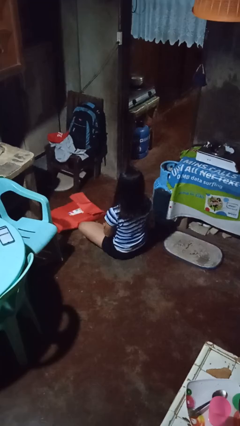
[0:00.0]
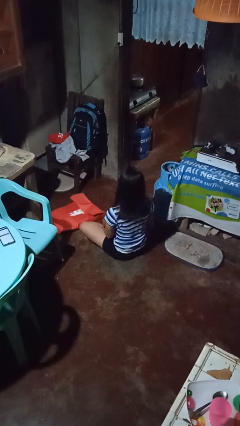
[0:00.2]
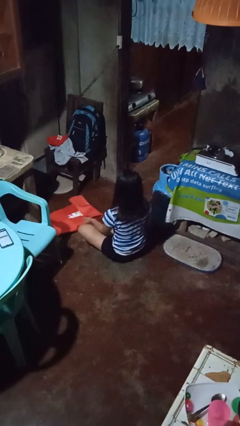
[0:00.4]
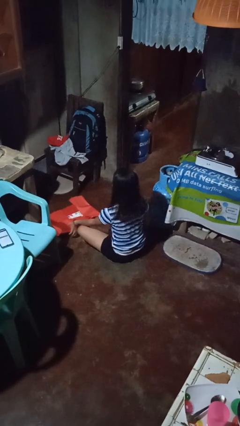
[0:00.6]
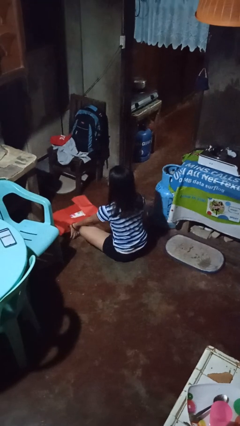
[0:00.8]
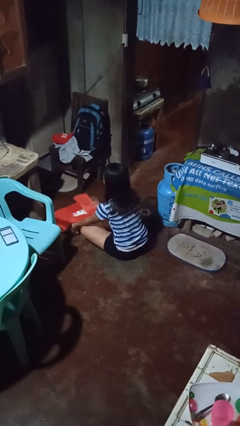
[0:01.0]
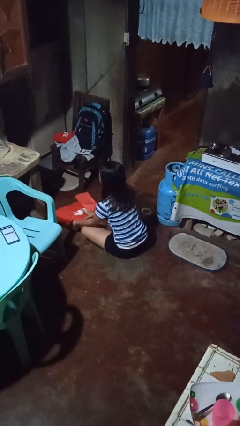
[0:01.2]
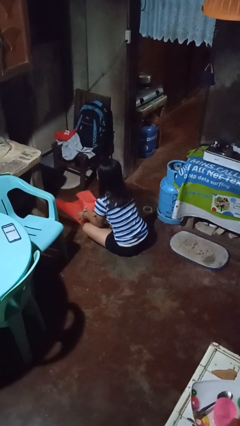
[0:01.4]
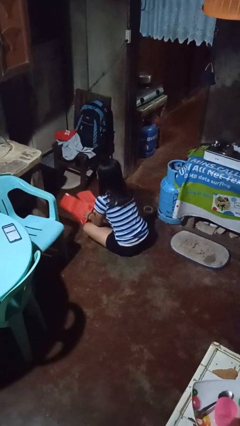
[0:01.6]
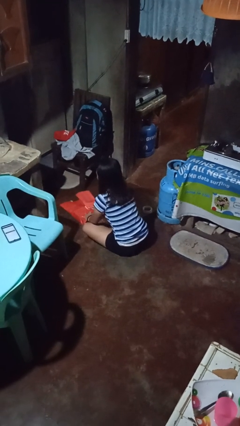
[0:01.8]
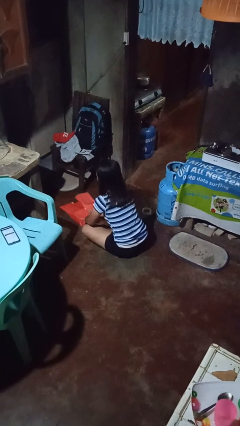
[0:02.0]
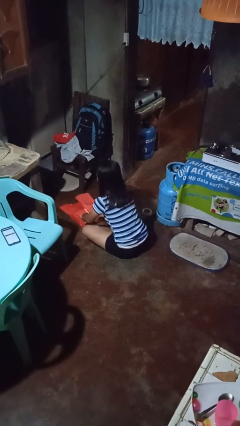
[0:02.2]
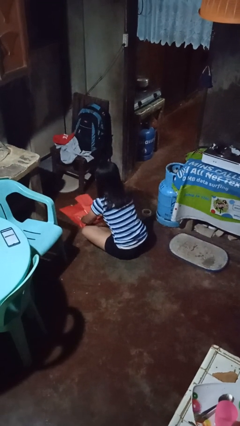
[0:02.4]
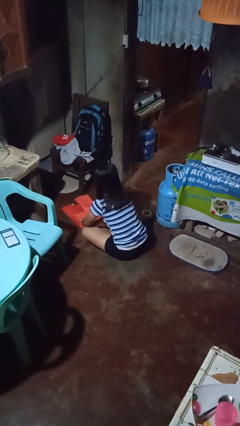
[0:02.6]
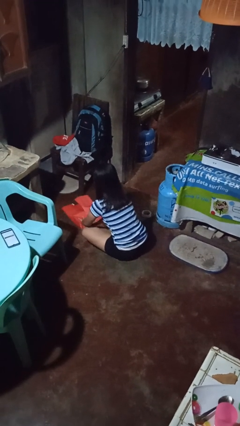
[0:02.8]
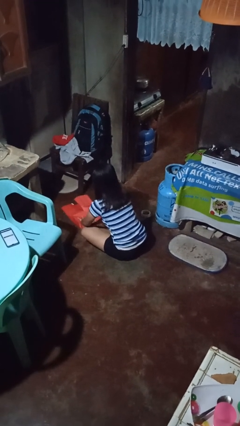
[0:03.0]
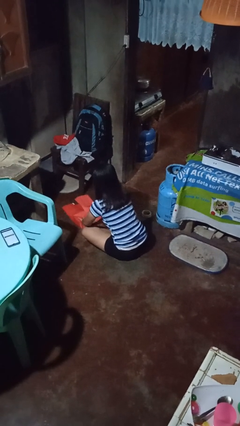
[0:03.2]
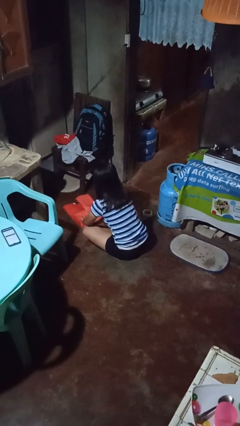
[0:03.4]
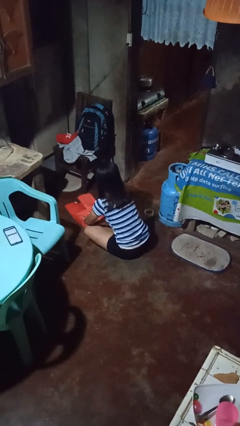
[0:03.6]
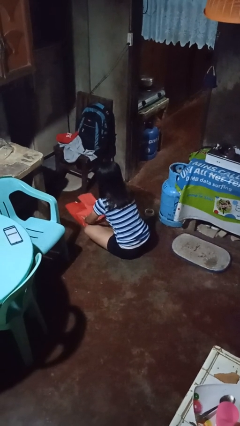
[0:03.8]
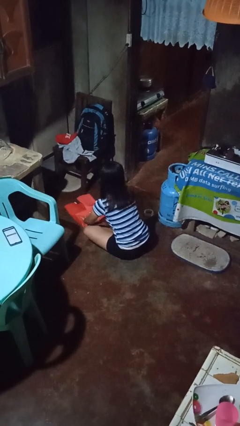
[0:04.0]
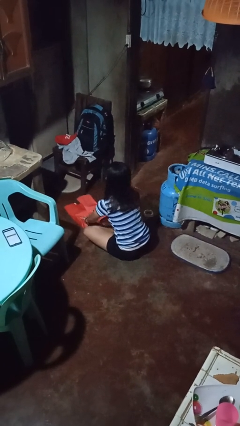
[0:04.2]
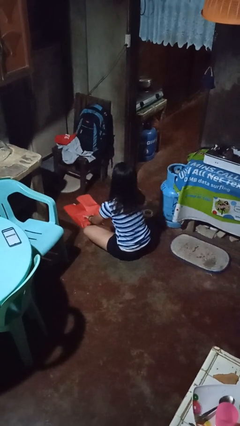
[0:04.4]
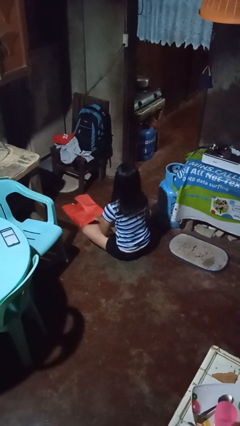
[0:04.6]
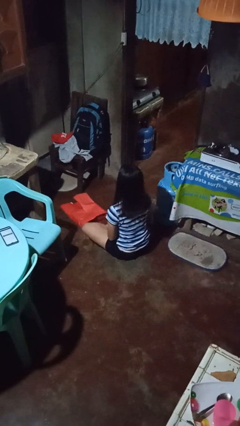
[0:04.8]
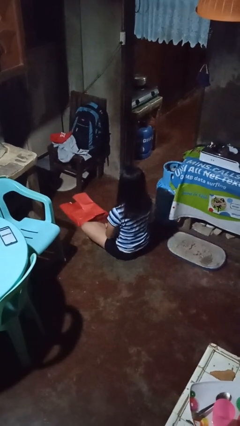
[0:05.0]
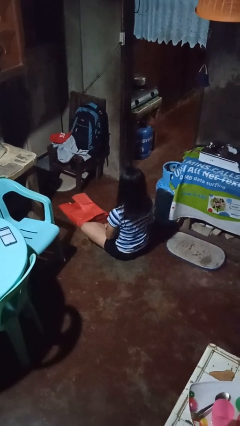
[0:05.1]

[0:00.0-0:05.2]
person wraps box

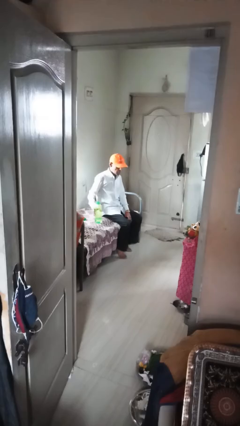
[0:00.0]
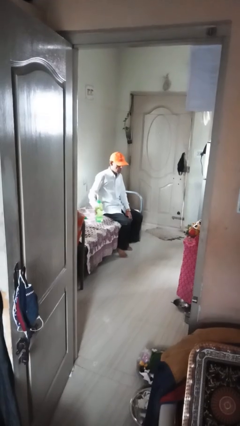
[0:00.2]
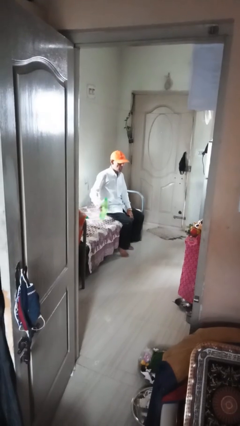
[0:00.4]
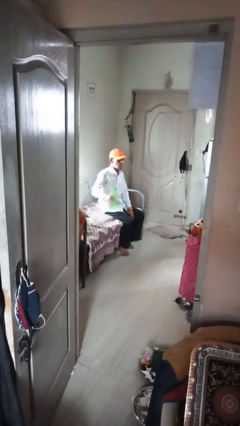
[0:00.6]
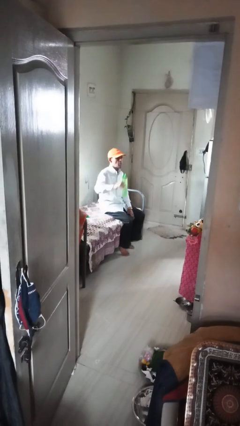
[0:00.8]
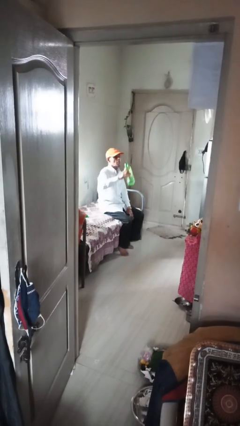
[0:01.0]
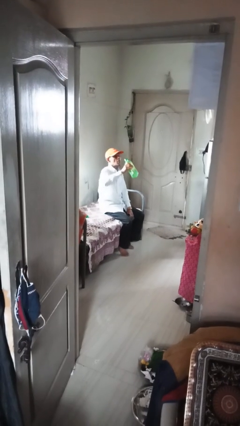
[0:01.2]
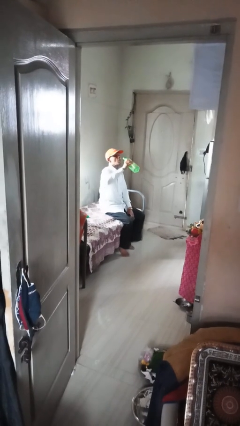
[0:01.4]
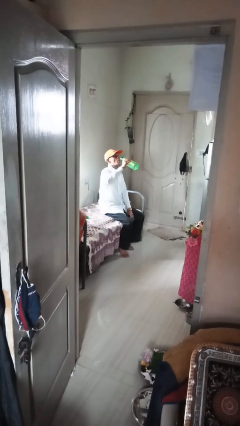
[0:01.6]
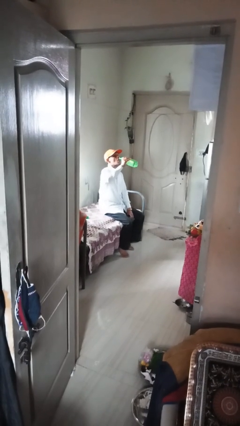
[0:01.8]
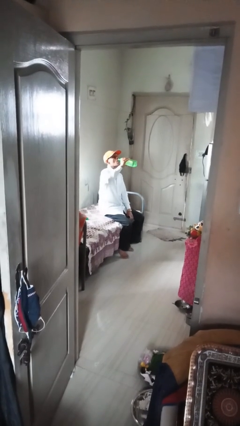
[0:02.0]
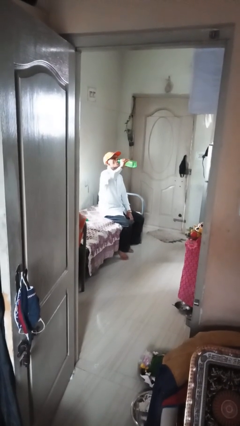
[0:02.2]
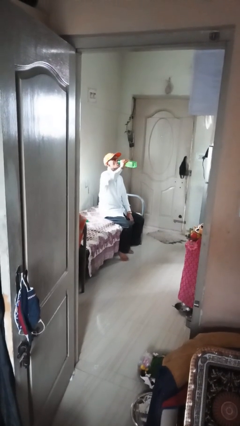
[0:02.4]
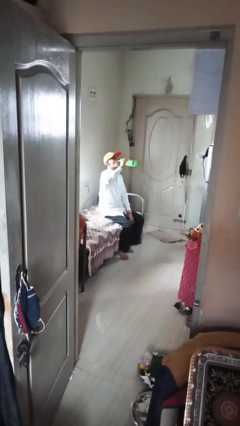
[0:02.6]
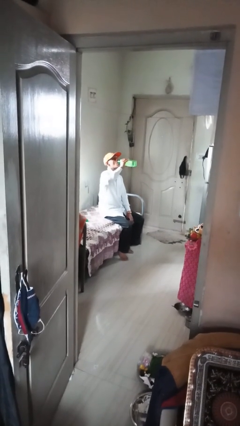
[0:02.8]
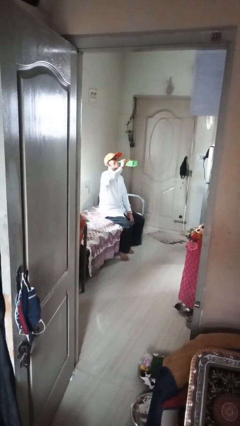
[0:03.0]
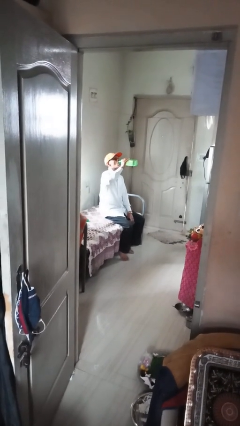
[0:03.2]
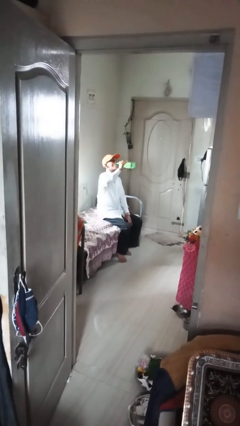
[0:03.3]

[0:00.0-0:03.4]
person drinks from bottle

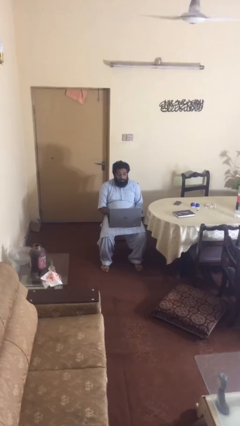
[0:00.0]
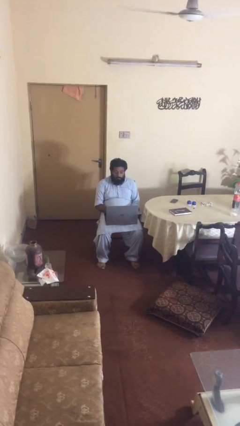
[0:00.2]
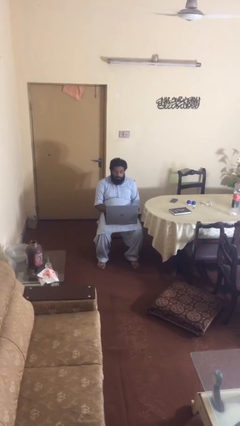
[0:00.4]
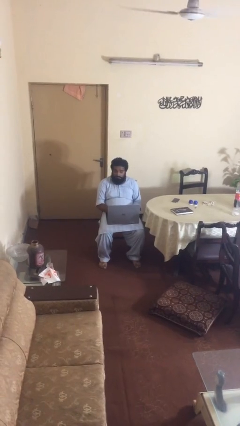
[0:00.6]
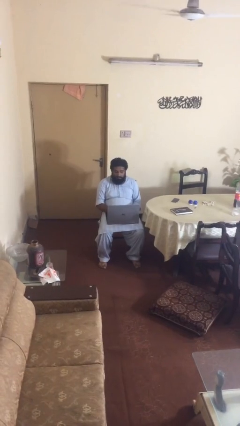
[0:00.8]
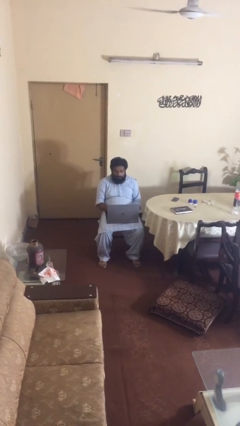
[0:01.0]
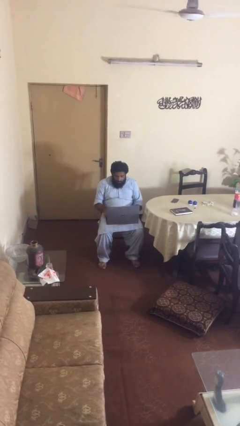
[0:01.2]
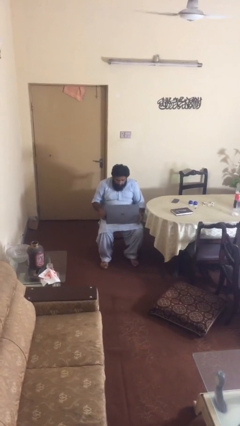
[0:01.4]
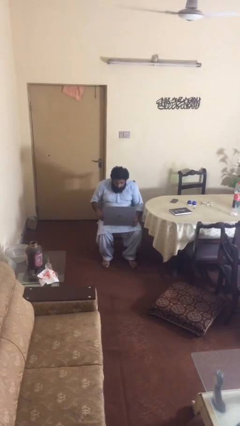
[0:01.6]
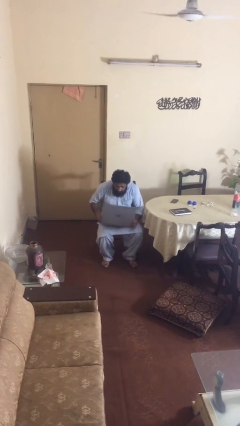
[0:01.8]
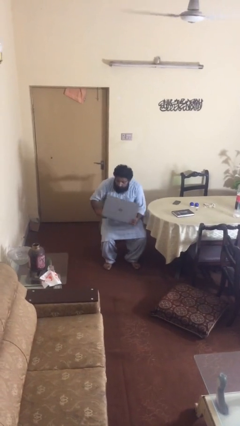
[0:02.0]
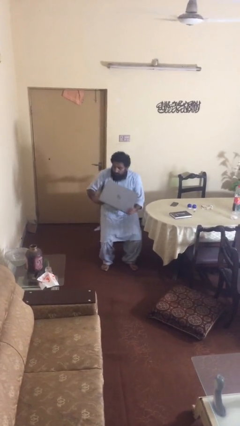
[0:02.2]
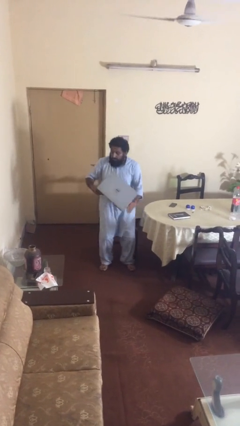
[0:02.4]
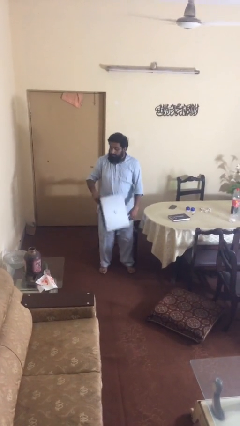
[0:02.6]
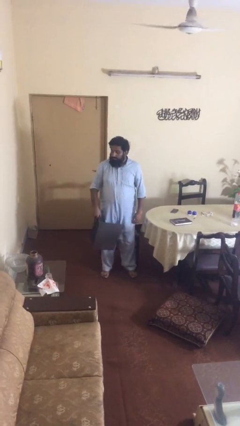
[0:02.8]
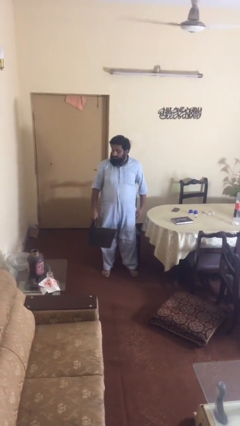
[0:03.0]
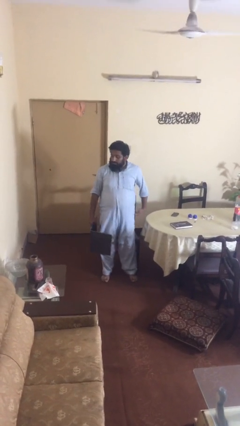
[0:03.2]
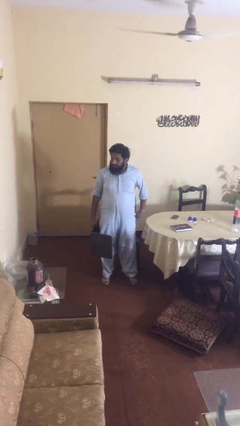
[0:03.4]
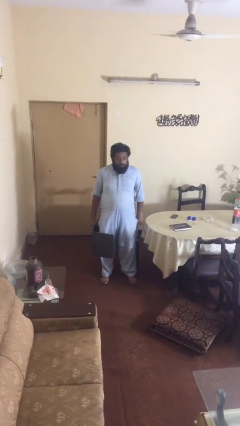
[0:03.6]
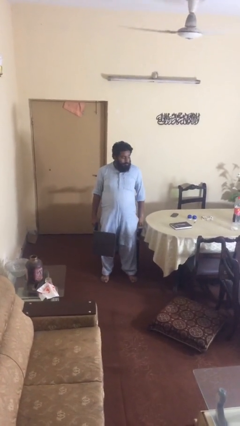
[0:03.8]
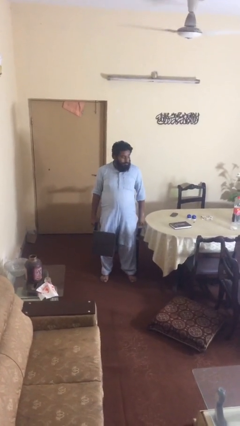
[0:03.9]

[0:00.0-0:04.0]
person stands up

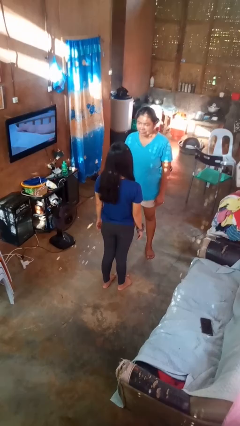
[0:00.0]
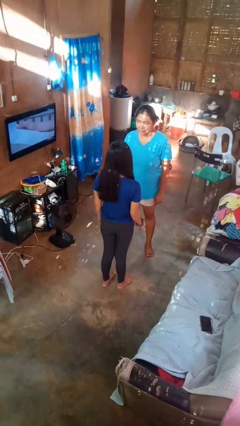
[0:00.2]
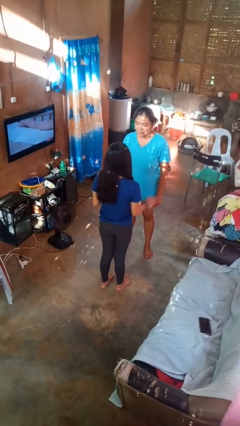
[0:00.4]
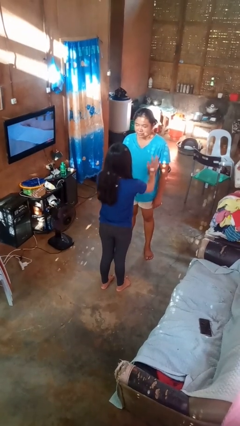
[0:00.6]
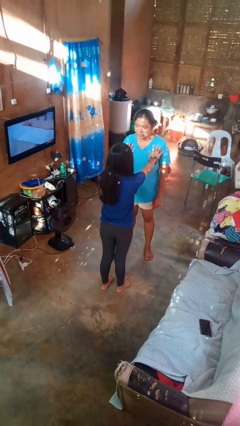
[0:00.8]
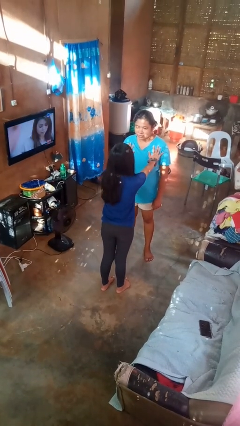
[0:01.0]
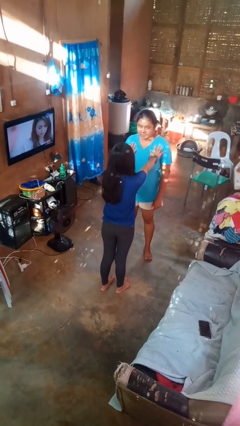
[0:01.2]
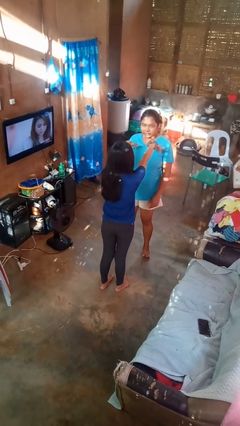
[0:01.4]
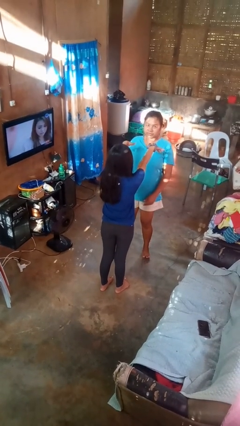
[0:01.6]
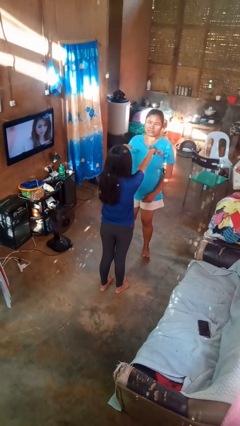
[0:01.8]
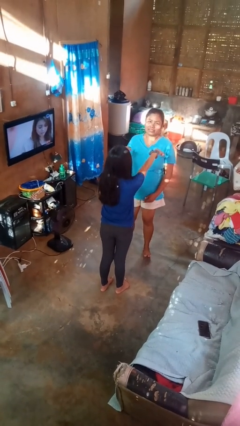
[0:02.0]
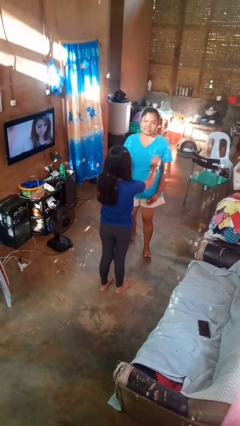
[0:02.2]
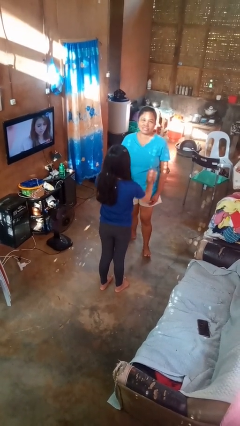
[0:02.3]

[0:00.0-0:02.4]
person shoves person

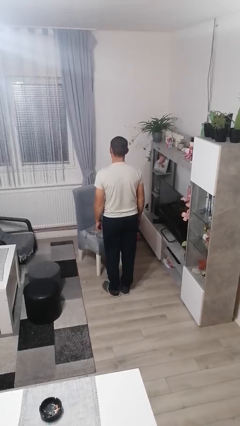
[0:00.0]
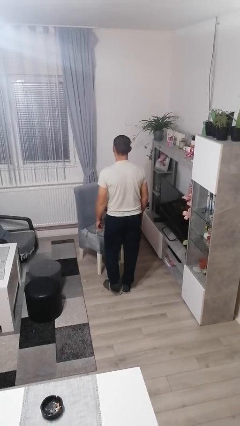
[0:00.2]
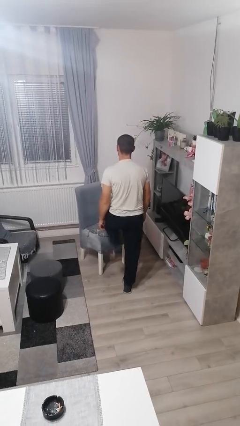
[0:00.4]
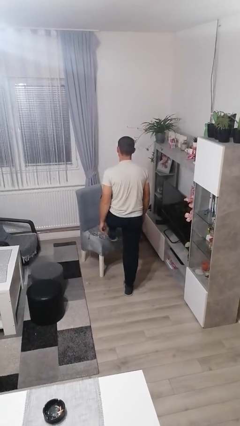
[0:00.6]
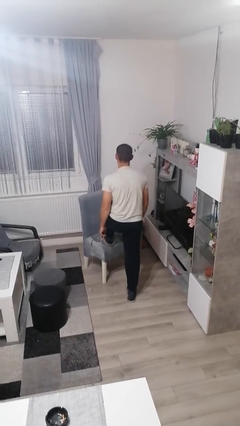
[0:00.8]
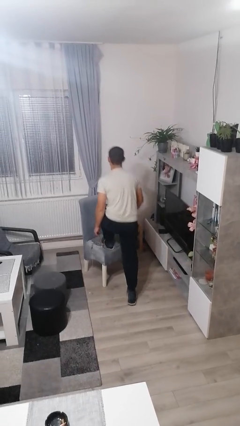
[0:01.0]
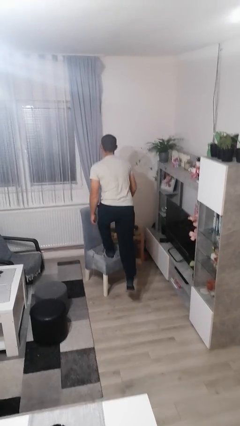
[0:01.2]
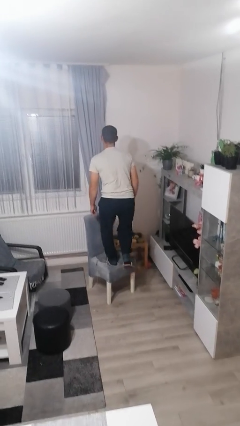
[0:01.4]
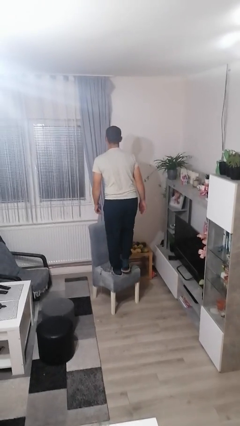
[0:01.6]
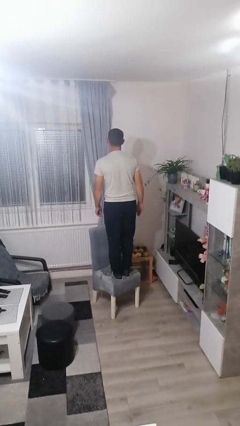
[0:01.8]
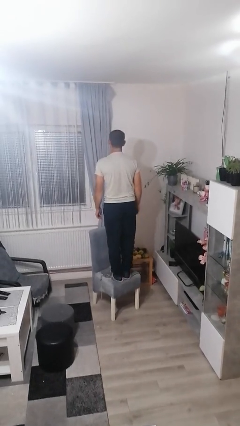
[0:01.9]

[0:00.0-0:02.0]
person climbs on chair

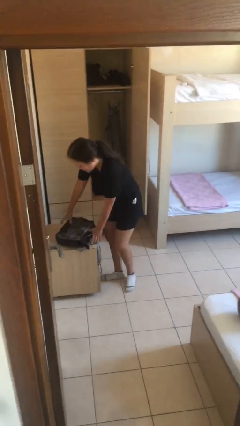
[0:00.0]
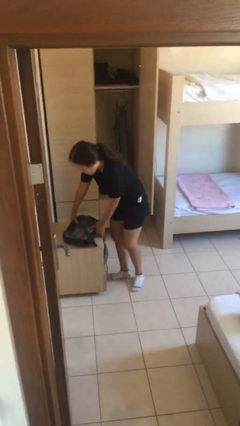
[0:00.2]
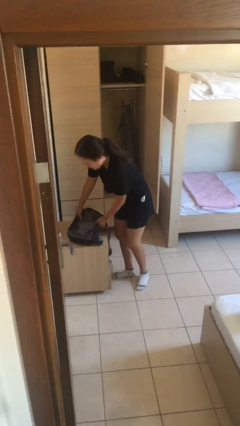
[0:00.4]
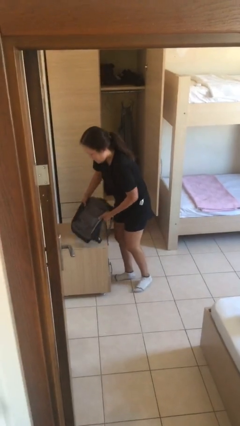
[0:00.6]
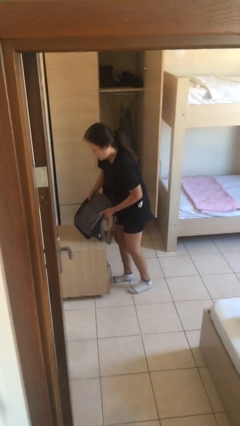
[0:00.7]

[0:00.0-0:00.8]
person picks up object from table
